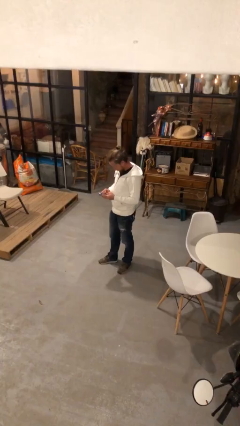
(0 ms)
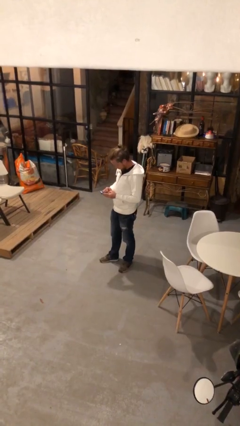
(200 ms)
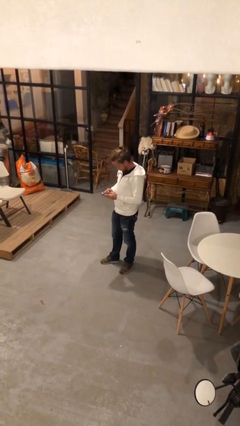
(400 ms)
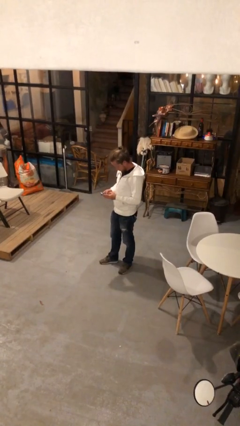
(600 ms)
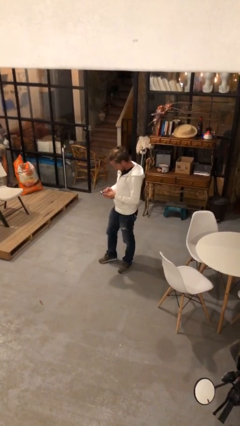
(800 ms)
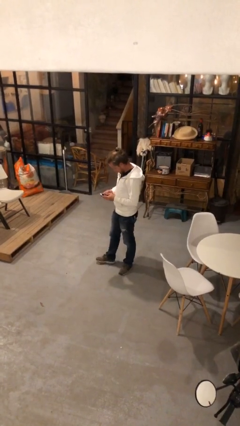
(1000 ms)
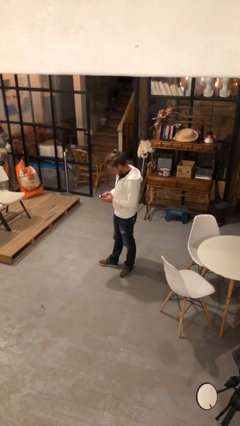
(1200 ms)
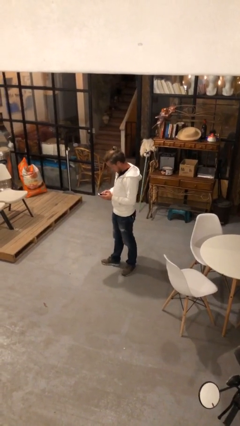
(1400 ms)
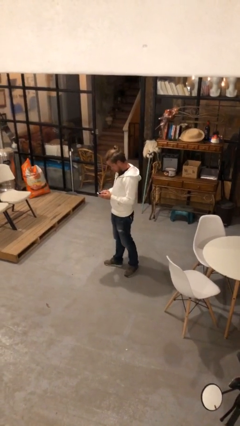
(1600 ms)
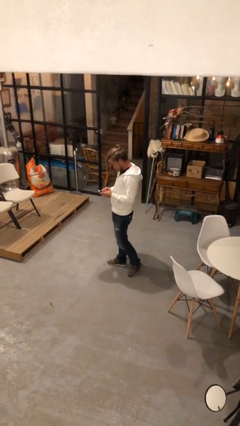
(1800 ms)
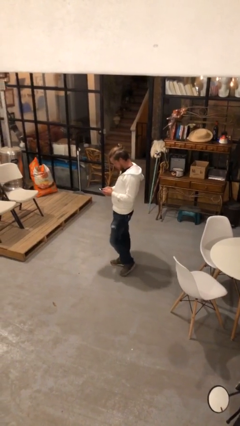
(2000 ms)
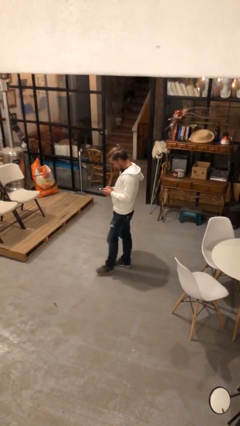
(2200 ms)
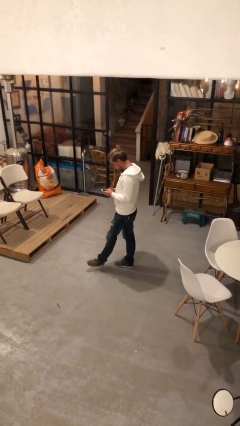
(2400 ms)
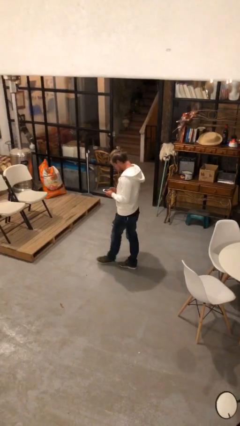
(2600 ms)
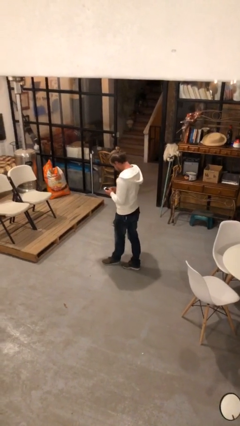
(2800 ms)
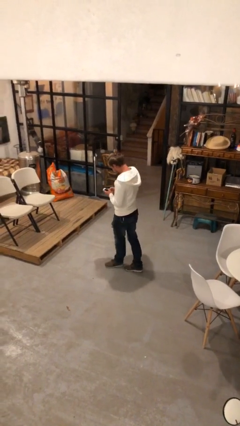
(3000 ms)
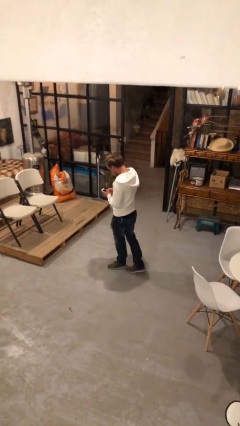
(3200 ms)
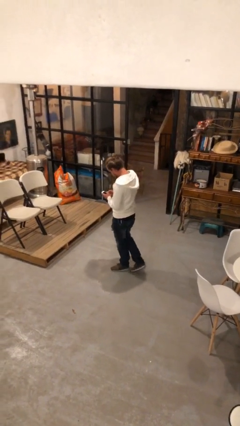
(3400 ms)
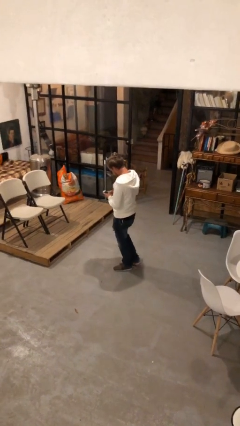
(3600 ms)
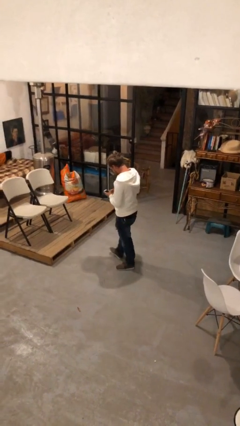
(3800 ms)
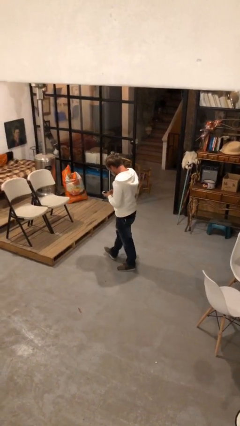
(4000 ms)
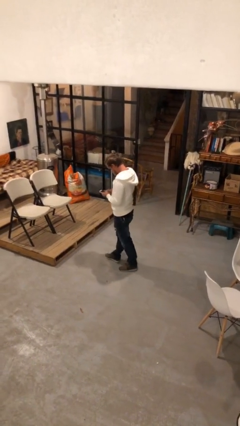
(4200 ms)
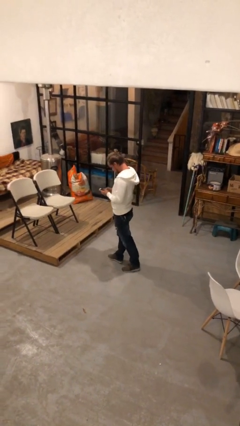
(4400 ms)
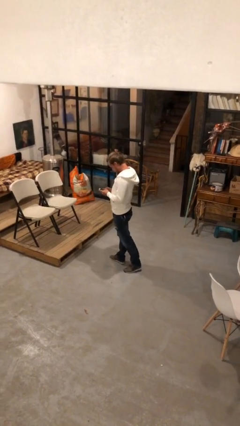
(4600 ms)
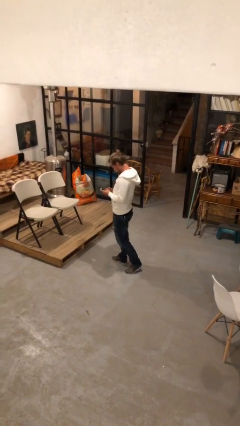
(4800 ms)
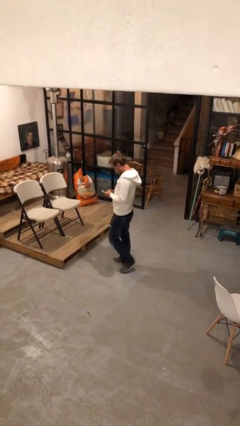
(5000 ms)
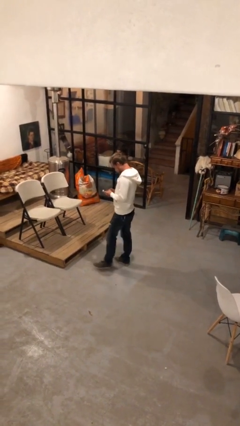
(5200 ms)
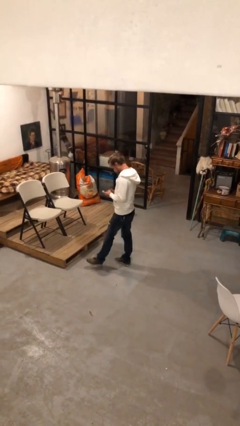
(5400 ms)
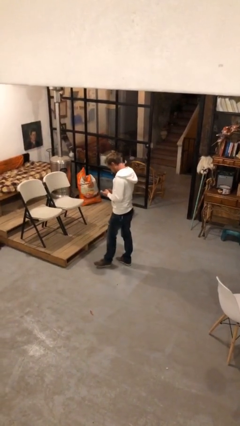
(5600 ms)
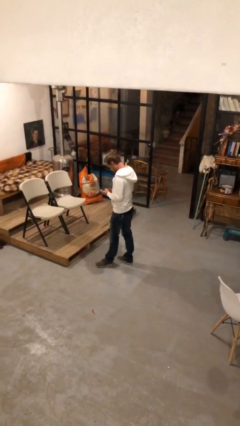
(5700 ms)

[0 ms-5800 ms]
person texts on phone

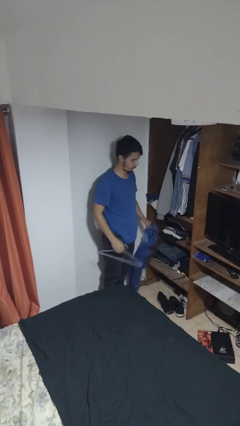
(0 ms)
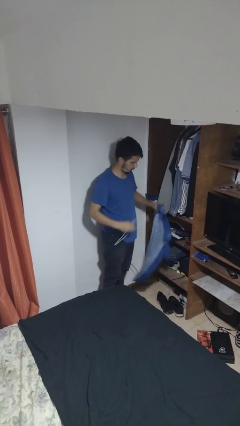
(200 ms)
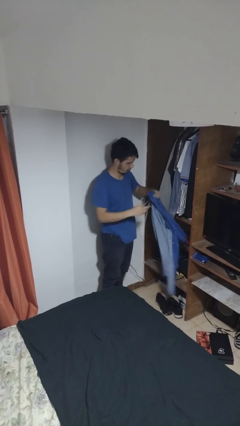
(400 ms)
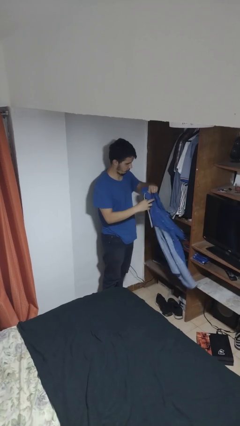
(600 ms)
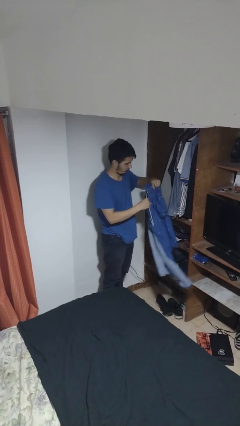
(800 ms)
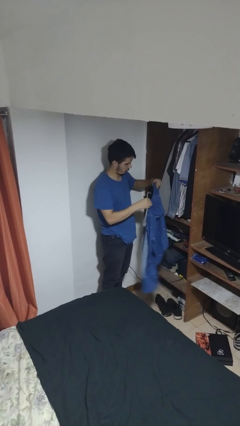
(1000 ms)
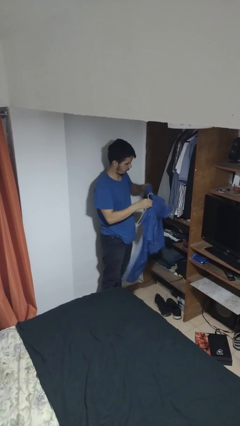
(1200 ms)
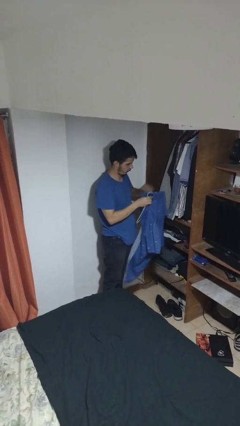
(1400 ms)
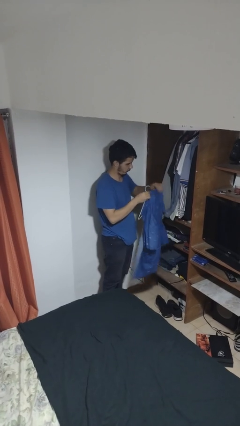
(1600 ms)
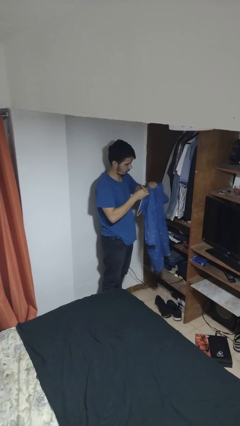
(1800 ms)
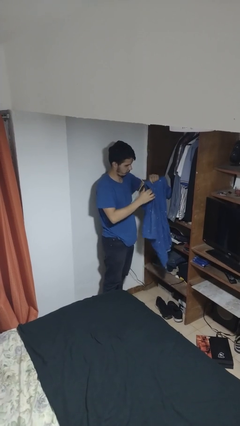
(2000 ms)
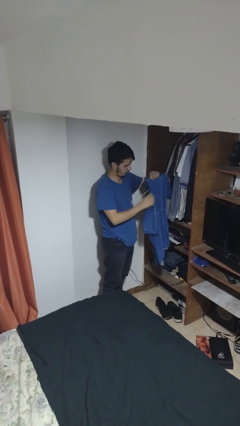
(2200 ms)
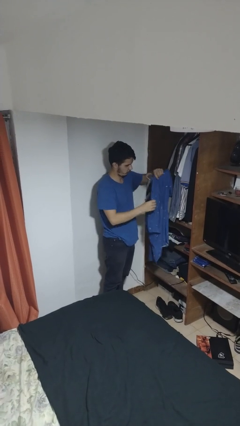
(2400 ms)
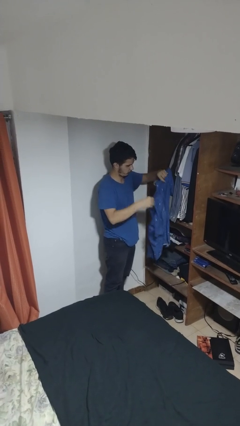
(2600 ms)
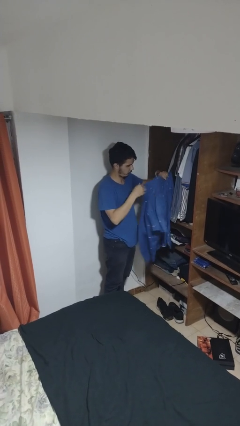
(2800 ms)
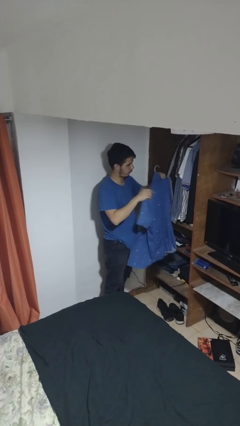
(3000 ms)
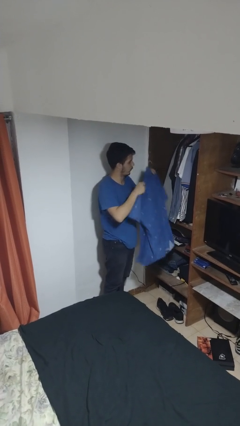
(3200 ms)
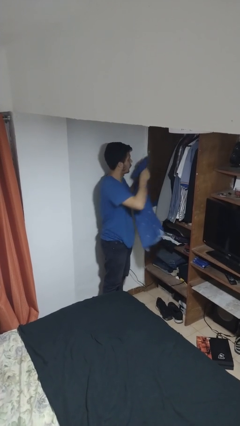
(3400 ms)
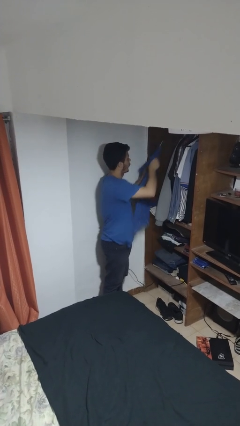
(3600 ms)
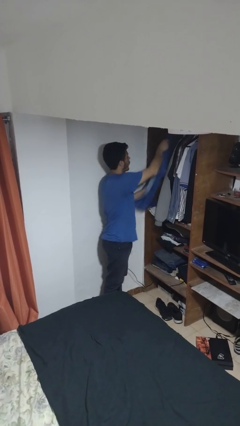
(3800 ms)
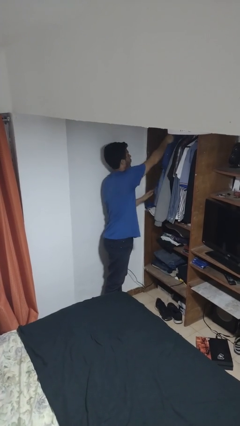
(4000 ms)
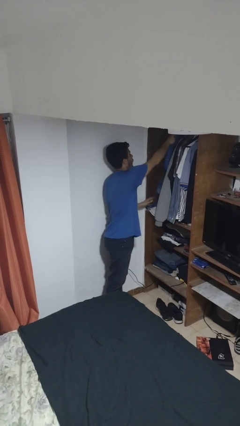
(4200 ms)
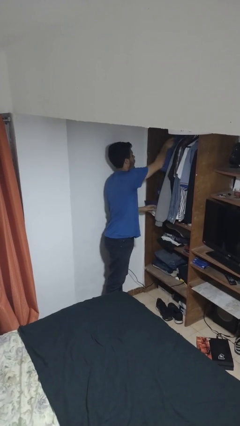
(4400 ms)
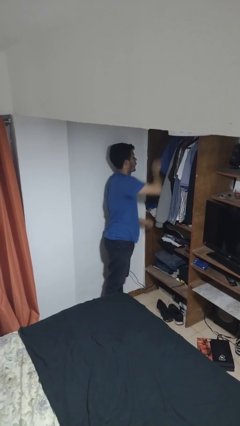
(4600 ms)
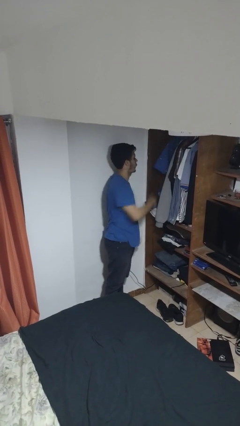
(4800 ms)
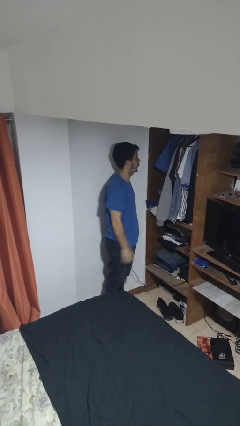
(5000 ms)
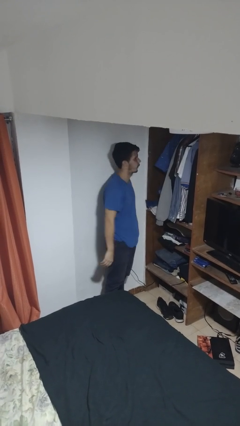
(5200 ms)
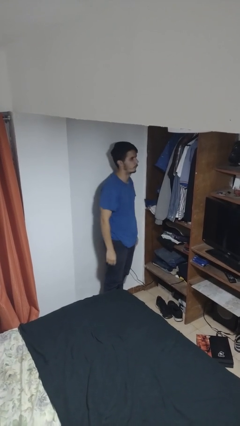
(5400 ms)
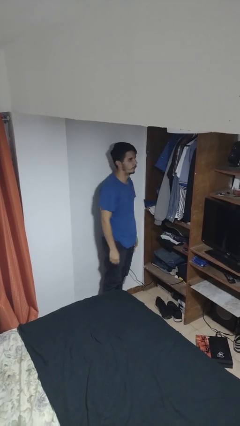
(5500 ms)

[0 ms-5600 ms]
person puts clothes into closet

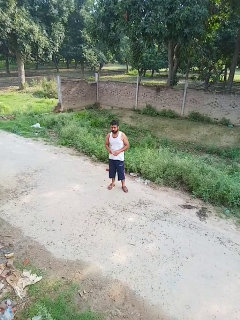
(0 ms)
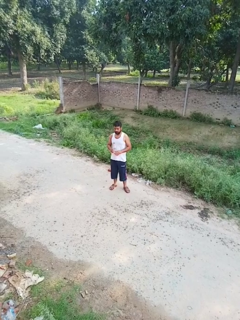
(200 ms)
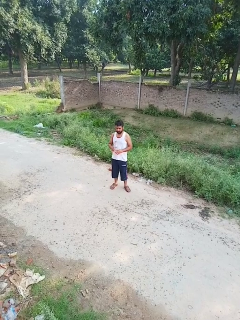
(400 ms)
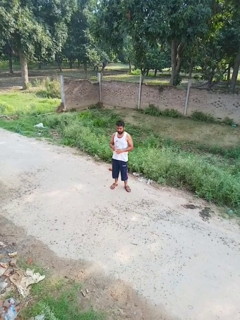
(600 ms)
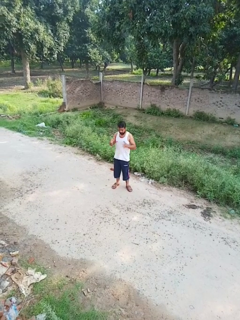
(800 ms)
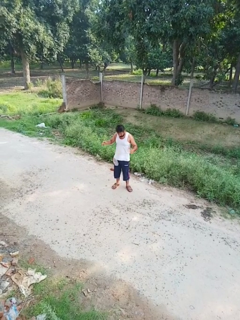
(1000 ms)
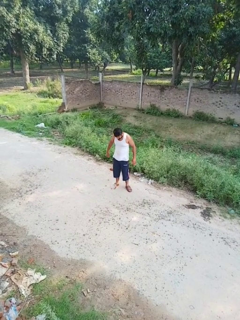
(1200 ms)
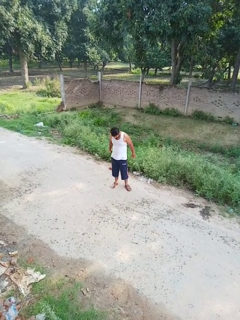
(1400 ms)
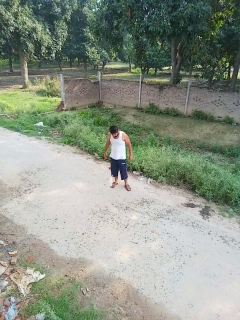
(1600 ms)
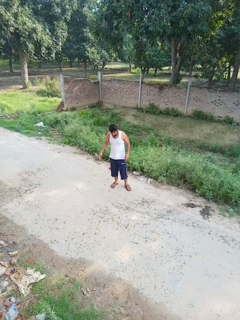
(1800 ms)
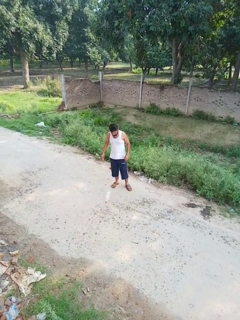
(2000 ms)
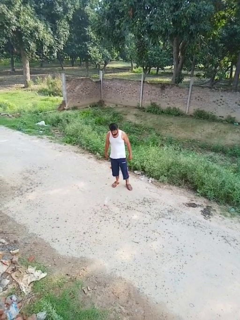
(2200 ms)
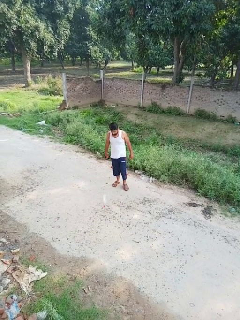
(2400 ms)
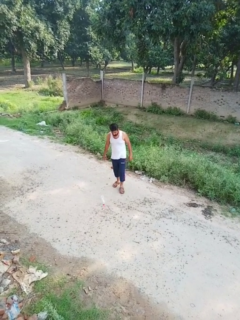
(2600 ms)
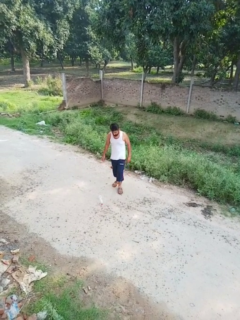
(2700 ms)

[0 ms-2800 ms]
person drops object

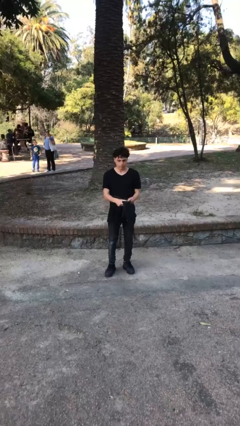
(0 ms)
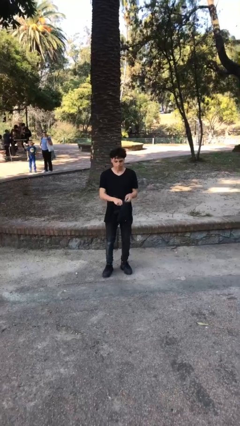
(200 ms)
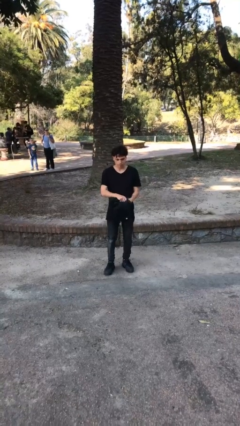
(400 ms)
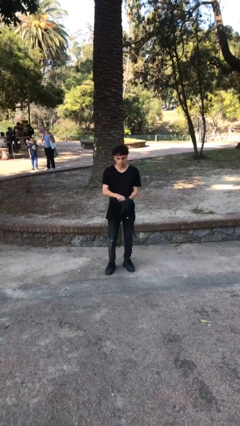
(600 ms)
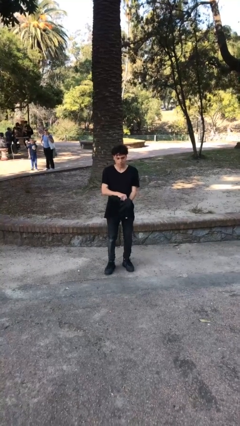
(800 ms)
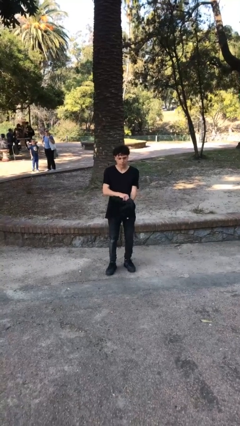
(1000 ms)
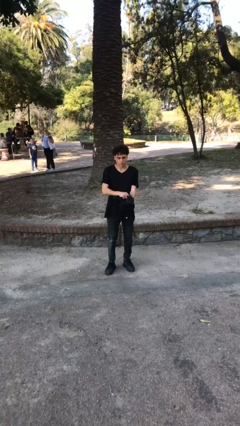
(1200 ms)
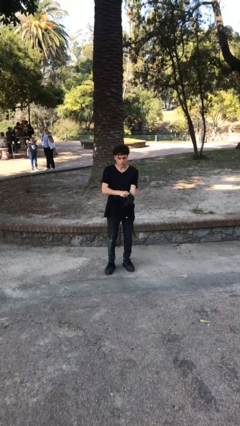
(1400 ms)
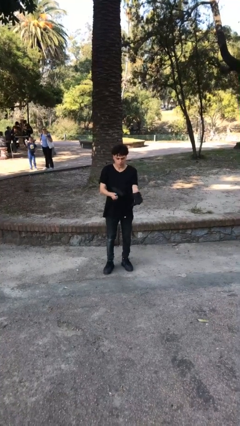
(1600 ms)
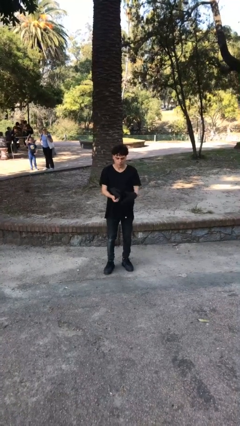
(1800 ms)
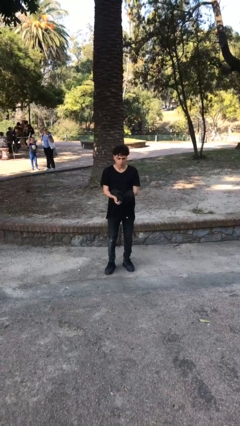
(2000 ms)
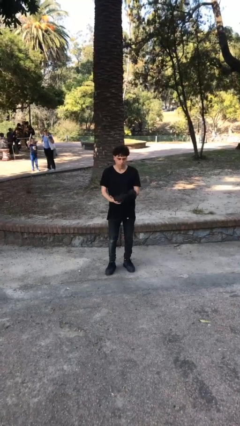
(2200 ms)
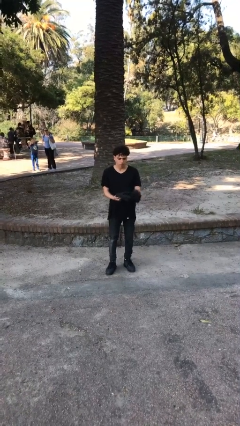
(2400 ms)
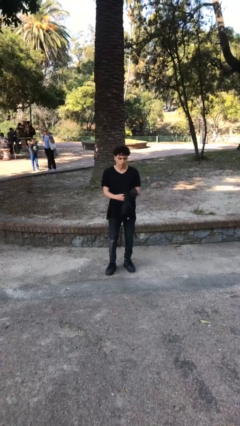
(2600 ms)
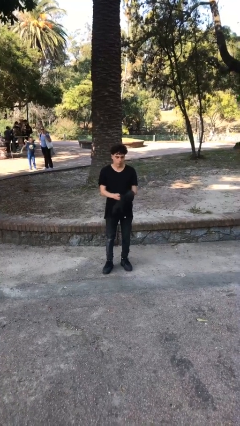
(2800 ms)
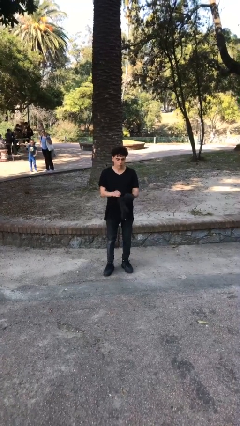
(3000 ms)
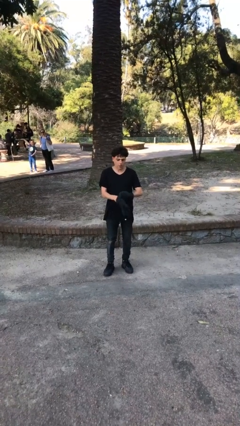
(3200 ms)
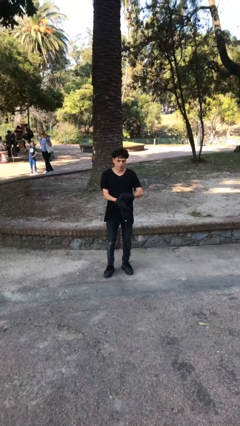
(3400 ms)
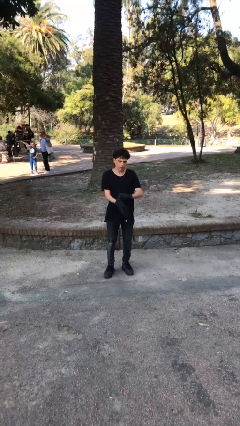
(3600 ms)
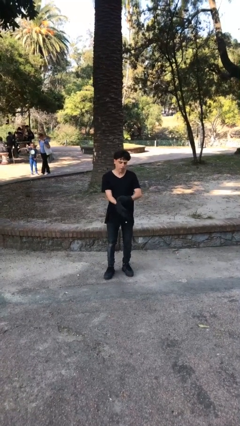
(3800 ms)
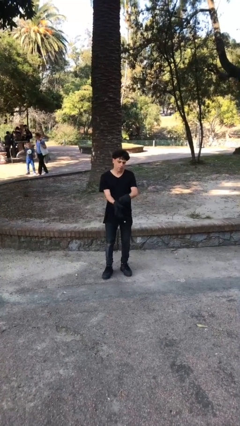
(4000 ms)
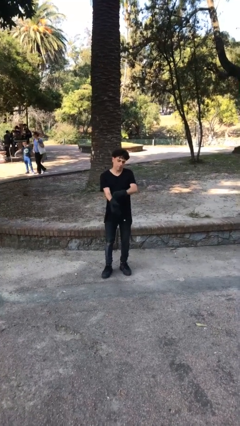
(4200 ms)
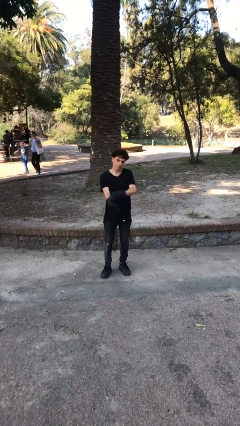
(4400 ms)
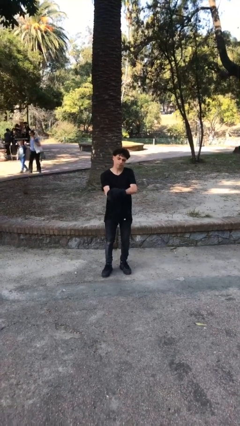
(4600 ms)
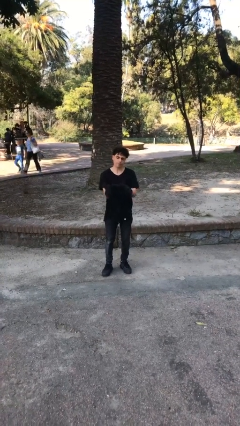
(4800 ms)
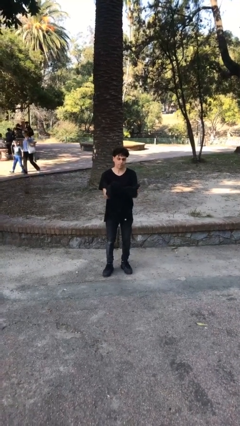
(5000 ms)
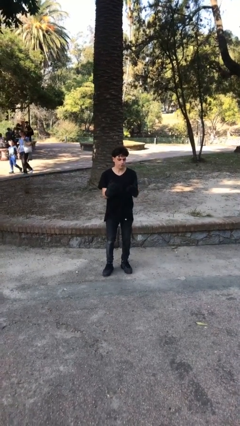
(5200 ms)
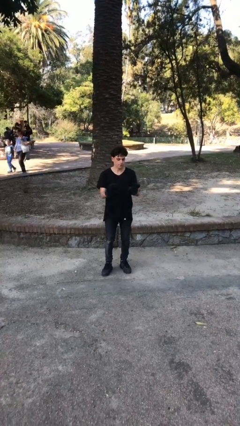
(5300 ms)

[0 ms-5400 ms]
person puts on gloves
